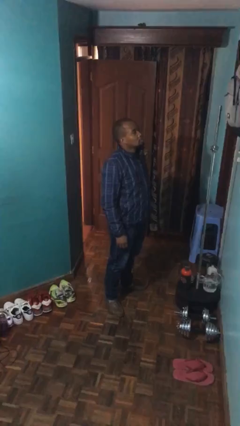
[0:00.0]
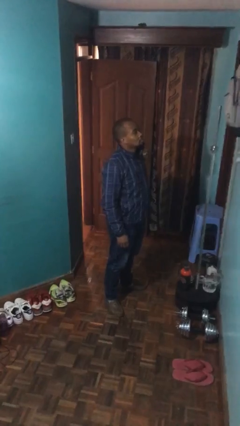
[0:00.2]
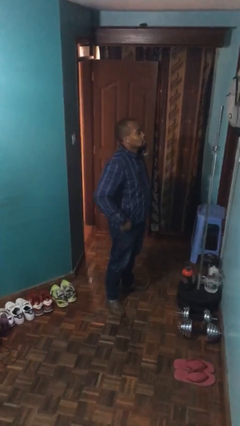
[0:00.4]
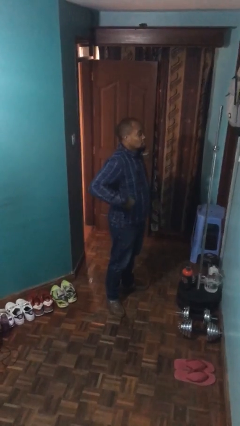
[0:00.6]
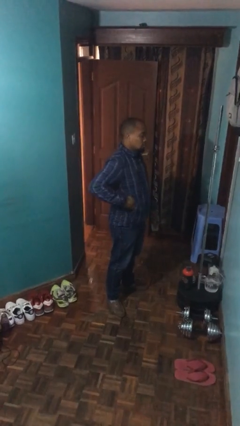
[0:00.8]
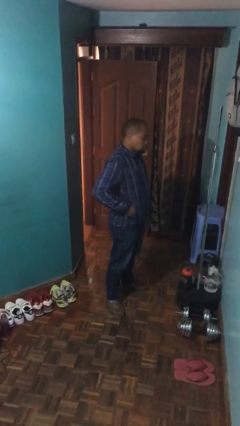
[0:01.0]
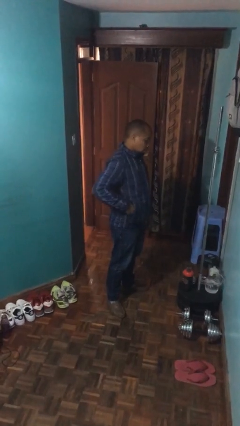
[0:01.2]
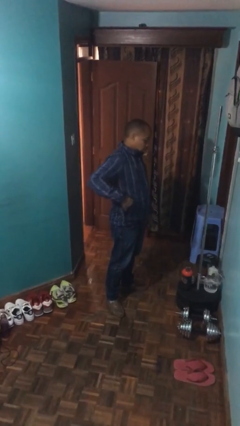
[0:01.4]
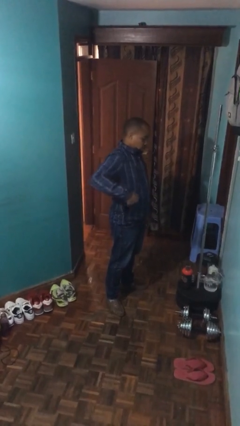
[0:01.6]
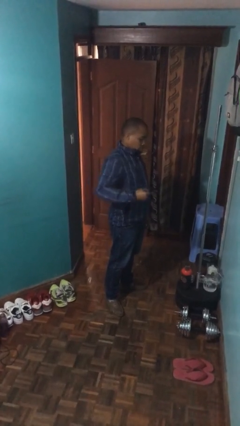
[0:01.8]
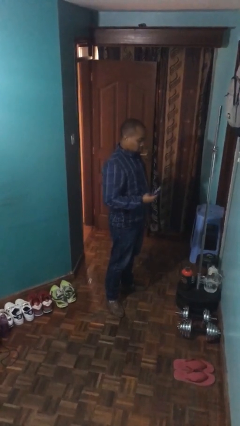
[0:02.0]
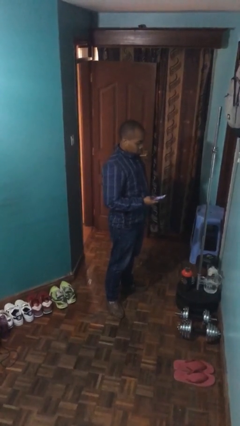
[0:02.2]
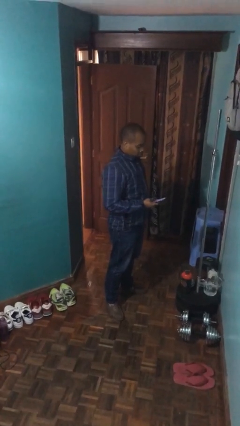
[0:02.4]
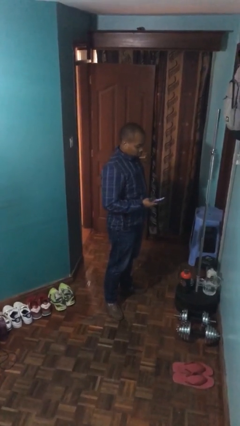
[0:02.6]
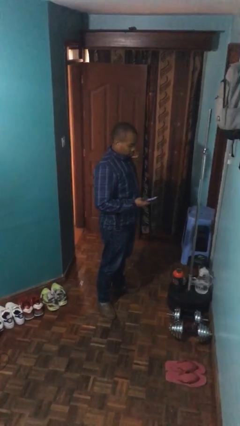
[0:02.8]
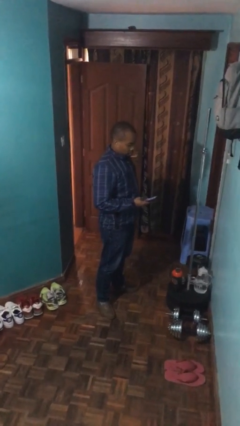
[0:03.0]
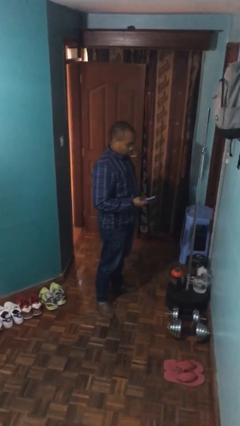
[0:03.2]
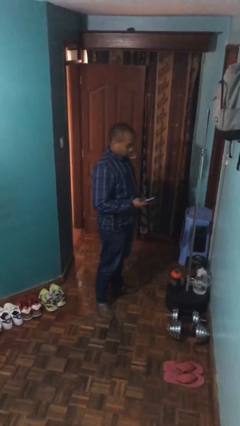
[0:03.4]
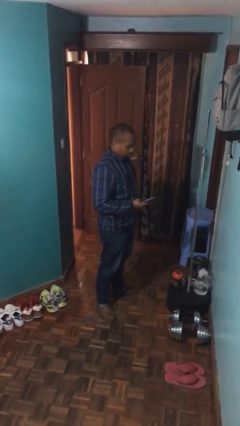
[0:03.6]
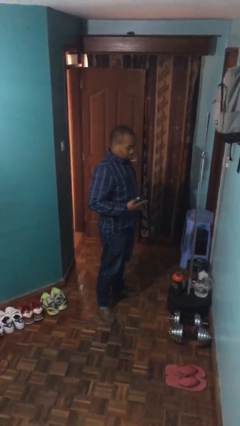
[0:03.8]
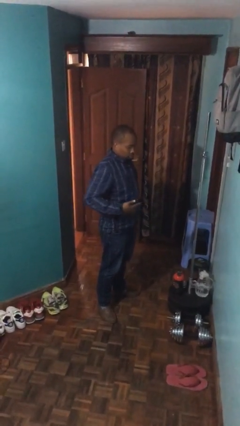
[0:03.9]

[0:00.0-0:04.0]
person takes phone from pocket

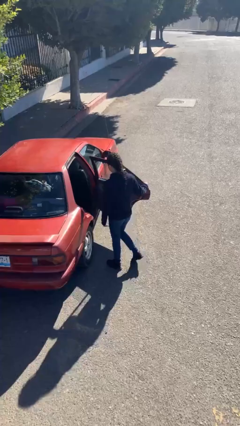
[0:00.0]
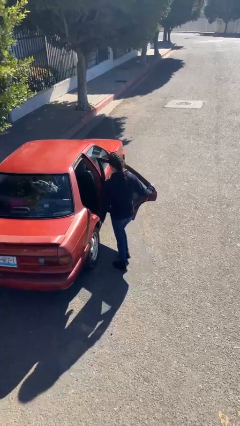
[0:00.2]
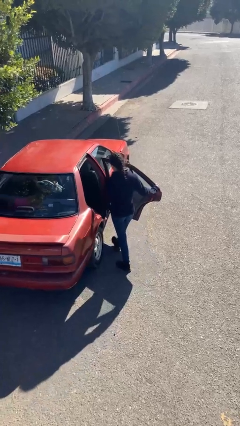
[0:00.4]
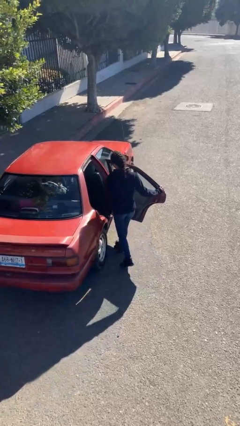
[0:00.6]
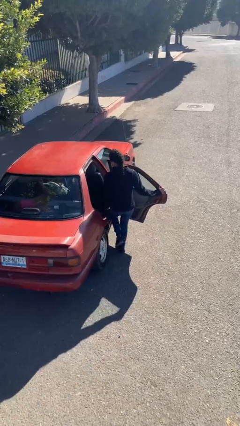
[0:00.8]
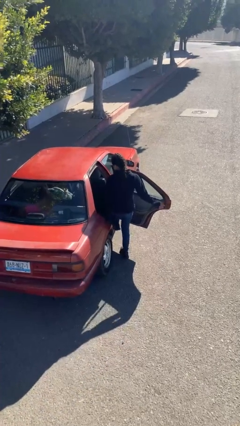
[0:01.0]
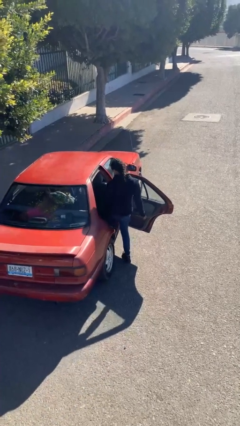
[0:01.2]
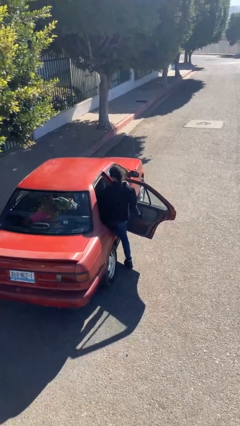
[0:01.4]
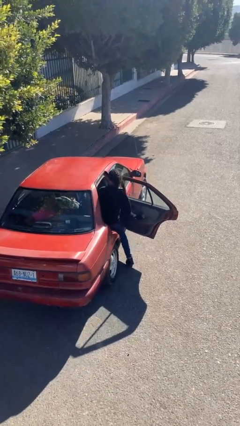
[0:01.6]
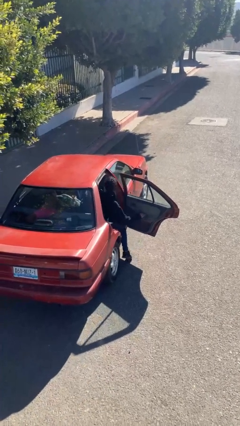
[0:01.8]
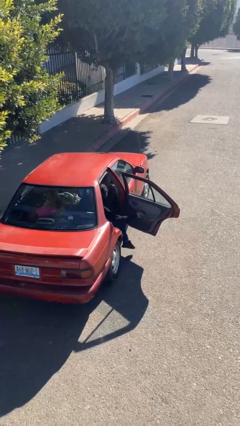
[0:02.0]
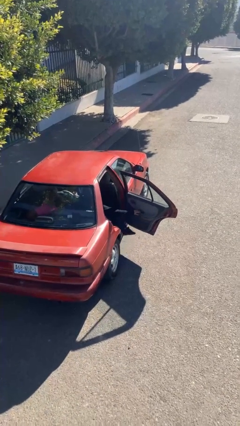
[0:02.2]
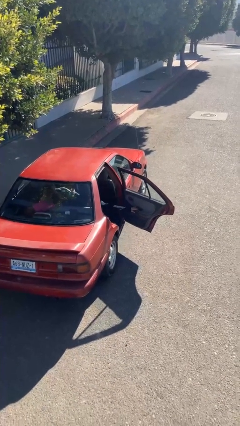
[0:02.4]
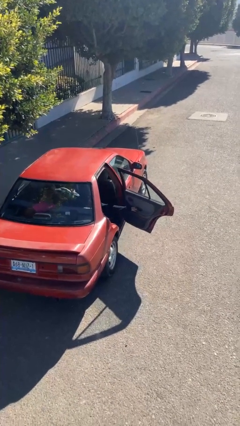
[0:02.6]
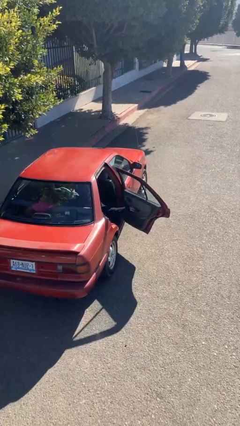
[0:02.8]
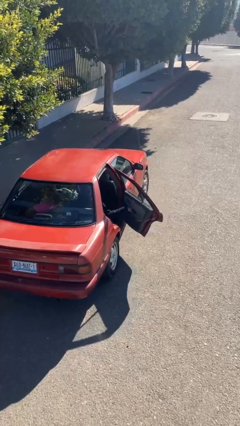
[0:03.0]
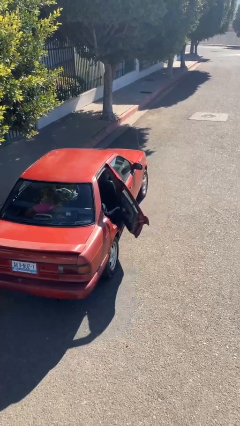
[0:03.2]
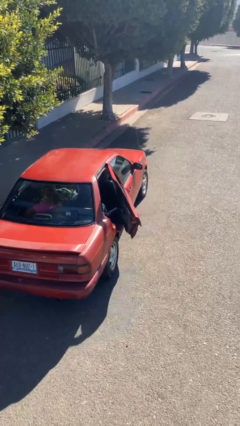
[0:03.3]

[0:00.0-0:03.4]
person enters car

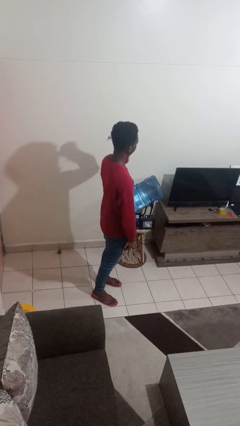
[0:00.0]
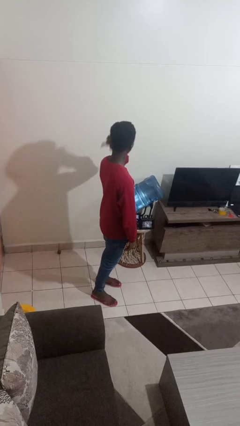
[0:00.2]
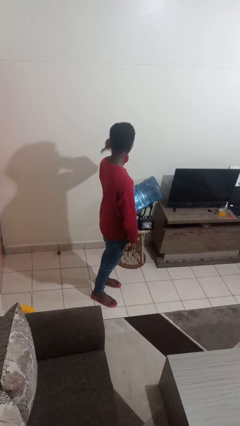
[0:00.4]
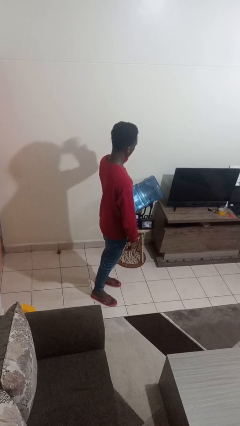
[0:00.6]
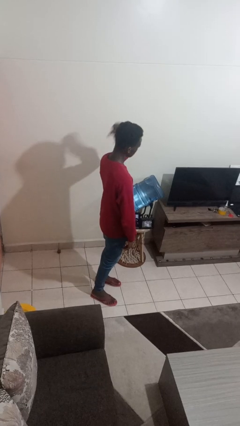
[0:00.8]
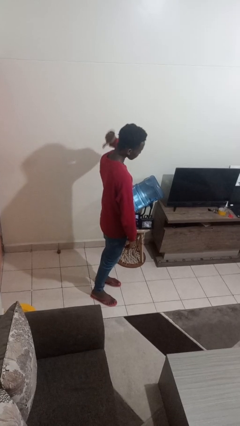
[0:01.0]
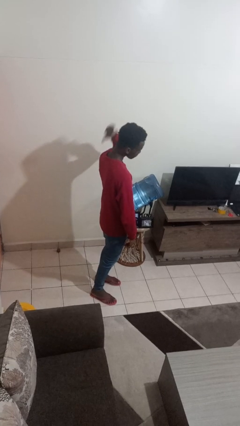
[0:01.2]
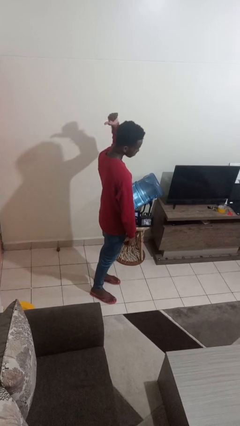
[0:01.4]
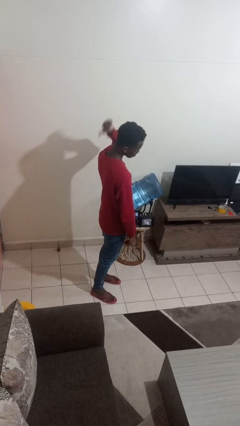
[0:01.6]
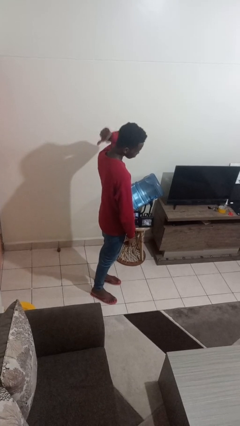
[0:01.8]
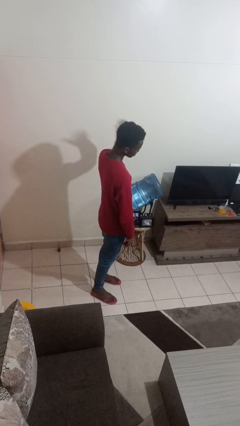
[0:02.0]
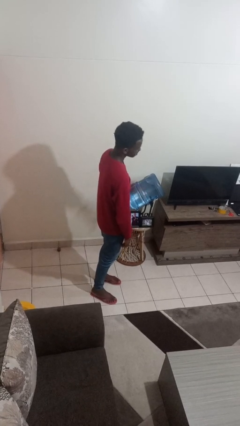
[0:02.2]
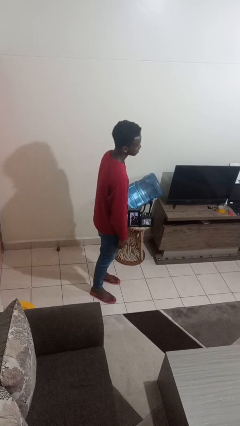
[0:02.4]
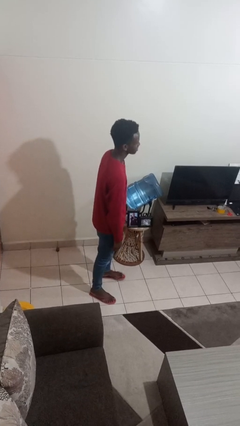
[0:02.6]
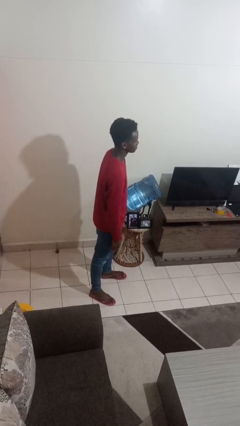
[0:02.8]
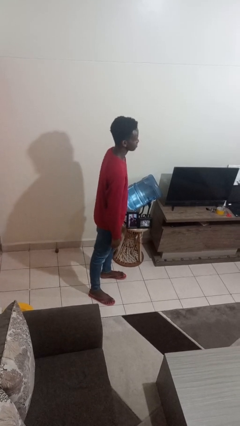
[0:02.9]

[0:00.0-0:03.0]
person gestures behind me

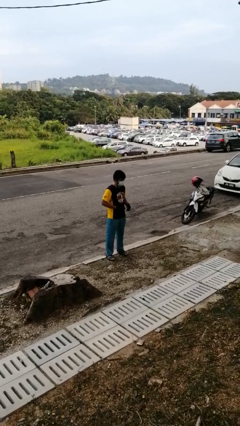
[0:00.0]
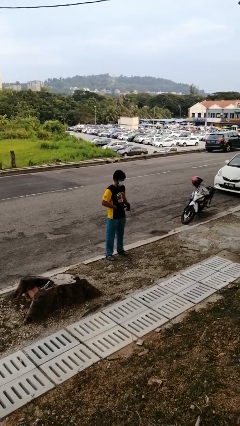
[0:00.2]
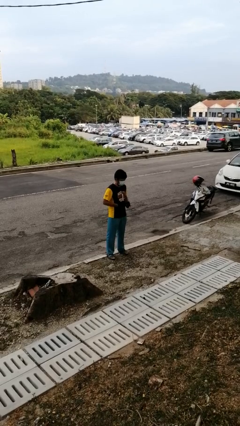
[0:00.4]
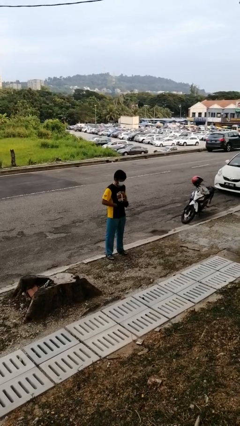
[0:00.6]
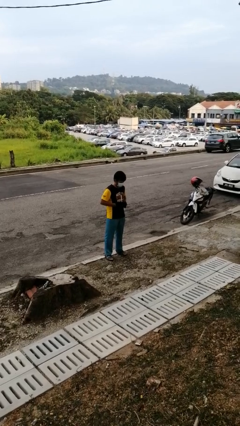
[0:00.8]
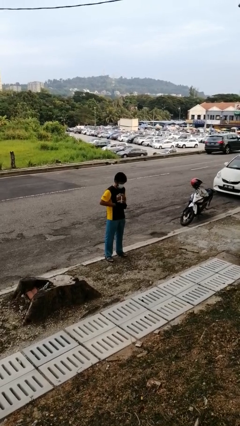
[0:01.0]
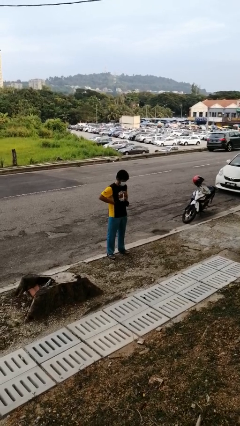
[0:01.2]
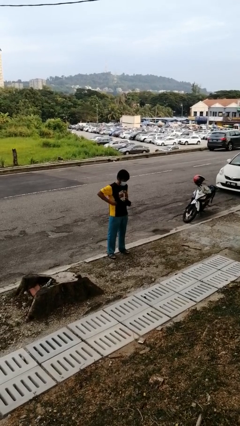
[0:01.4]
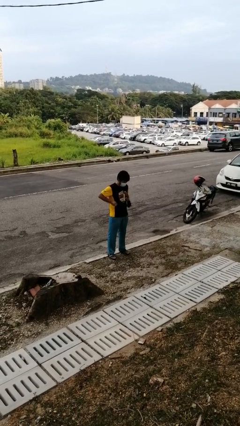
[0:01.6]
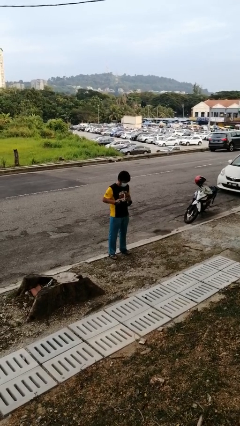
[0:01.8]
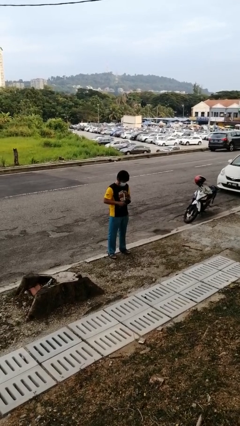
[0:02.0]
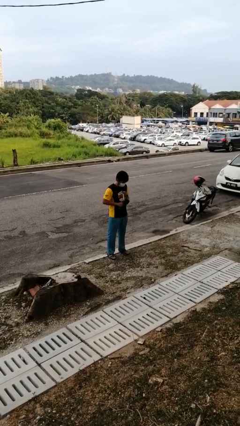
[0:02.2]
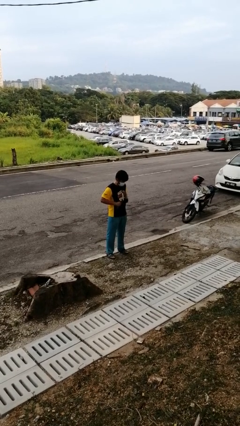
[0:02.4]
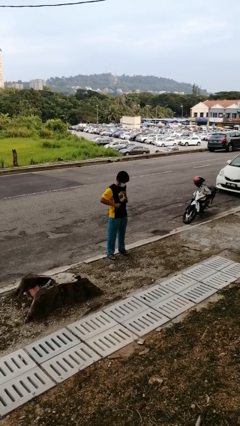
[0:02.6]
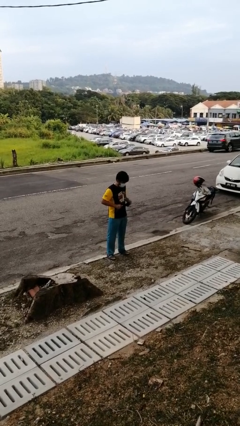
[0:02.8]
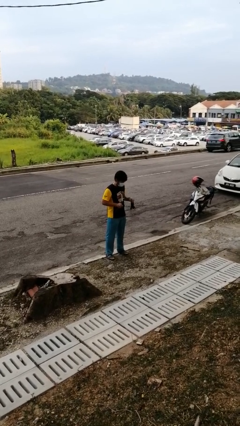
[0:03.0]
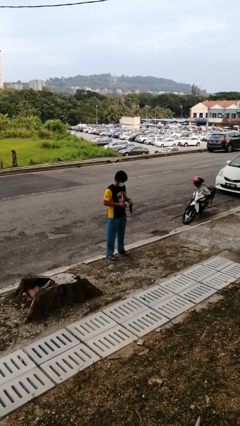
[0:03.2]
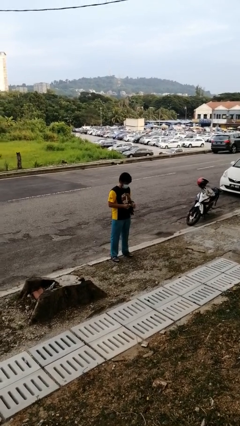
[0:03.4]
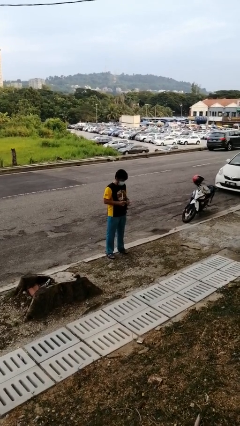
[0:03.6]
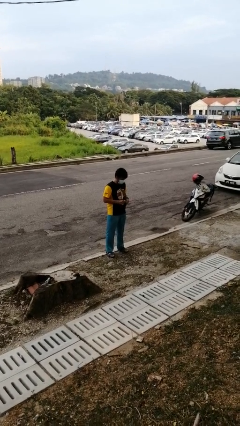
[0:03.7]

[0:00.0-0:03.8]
person takes off gloves

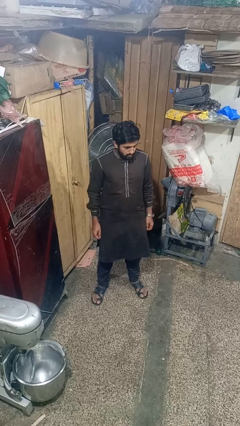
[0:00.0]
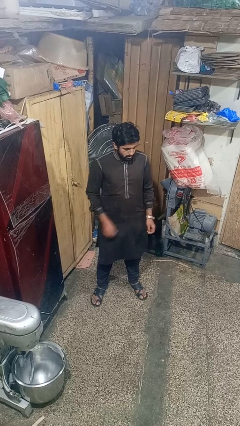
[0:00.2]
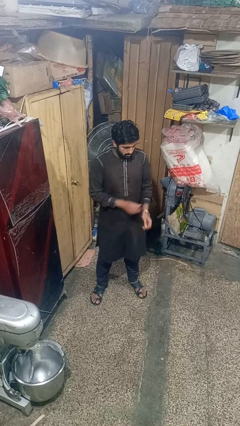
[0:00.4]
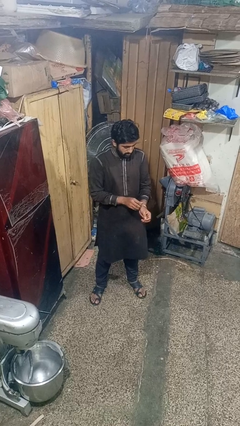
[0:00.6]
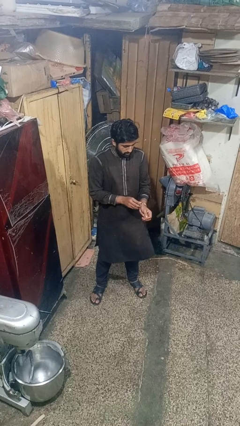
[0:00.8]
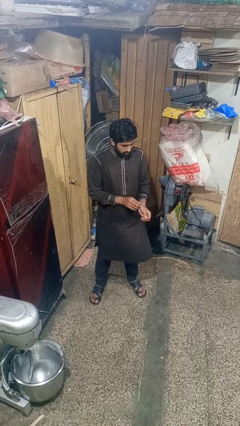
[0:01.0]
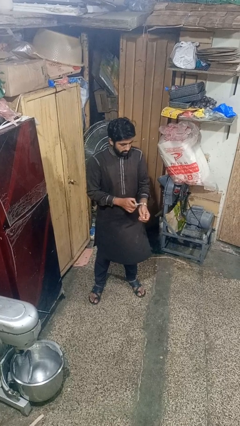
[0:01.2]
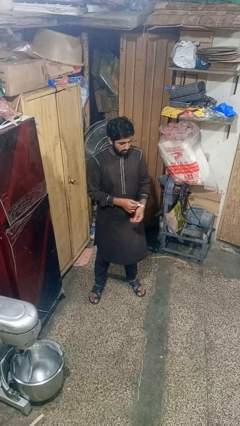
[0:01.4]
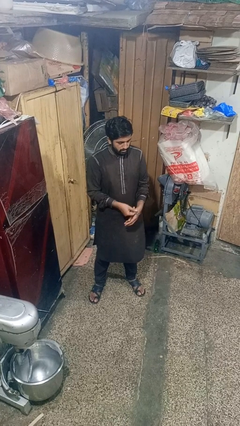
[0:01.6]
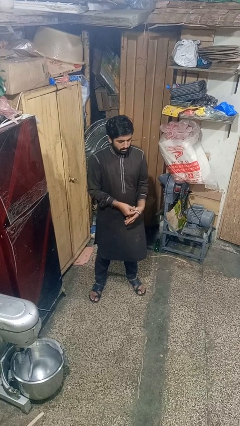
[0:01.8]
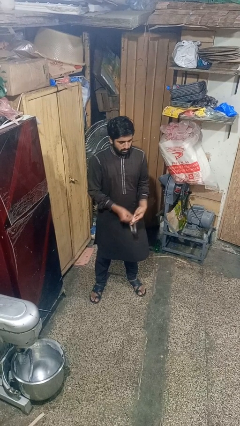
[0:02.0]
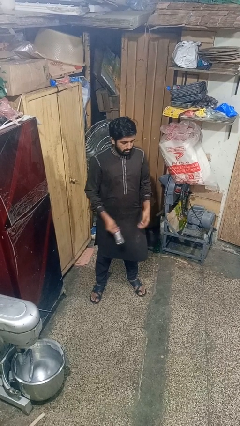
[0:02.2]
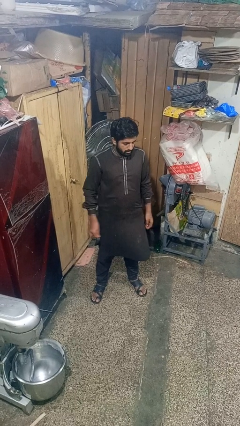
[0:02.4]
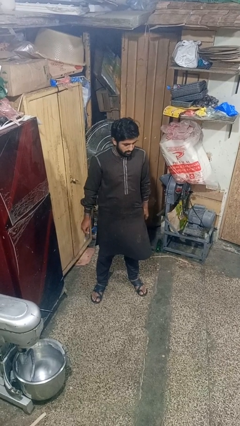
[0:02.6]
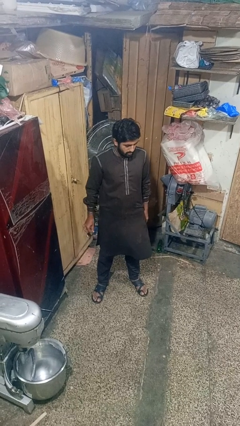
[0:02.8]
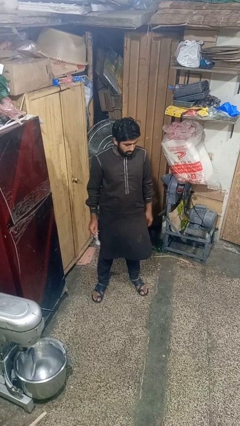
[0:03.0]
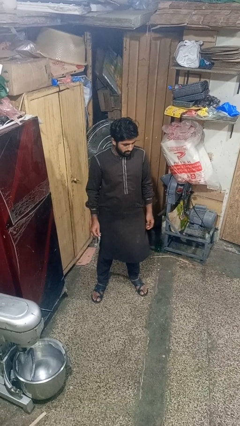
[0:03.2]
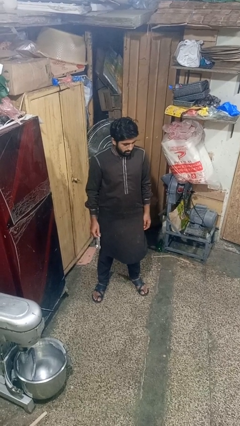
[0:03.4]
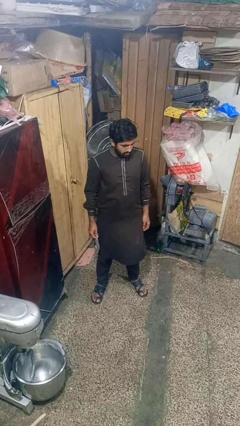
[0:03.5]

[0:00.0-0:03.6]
person takes off wristwatch
